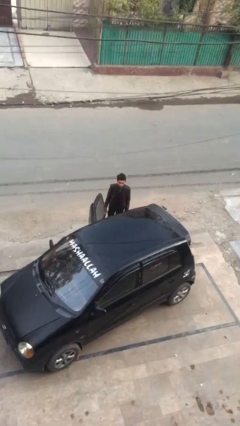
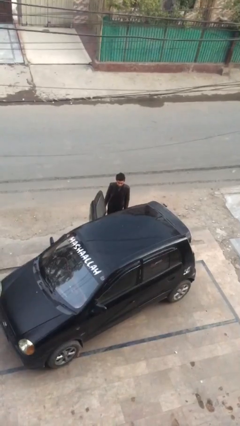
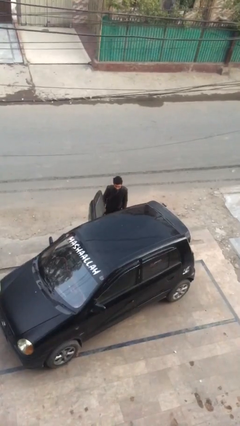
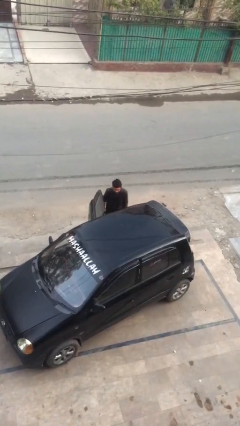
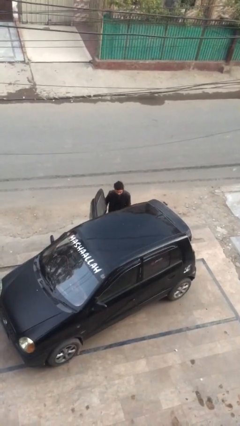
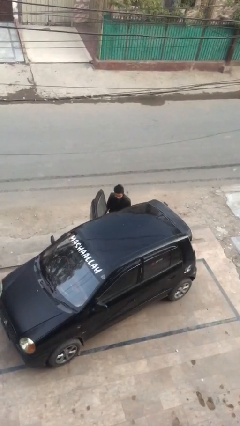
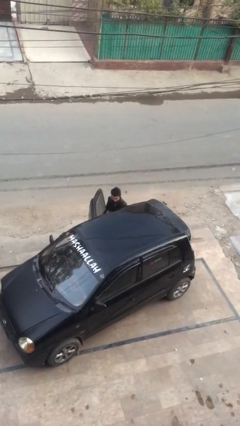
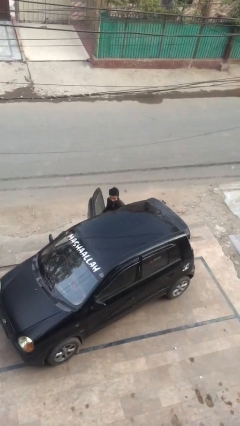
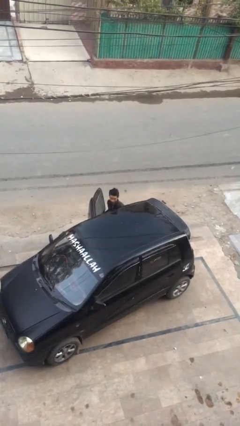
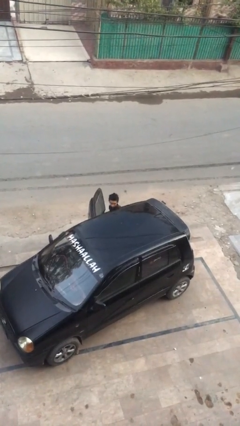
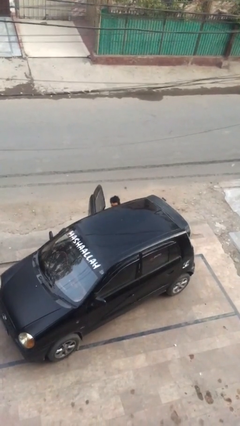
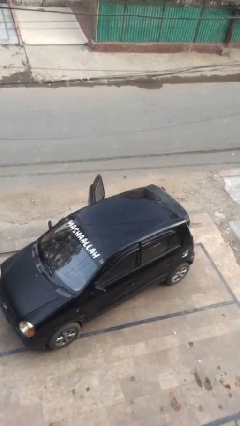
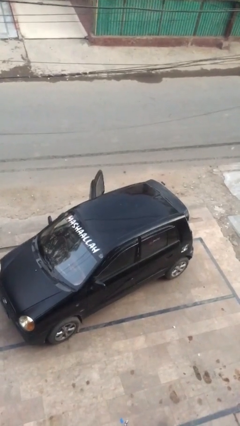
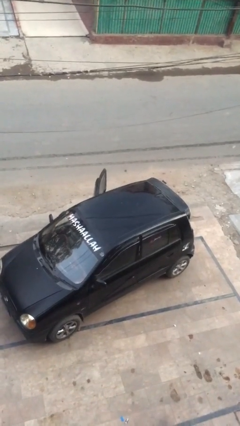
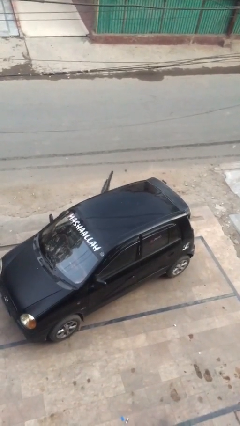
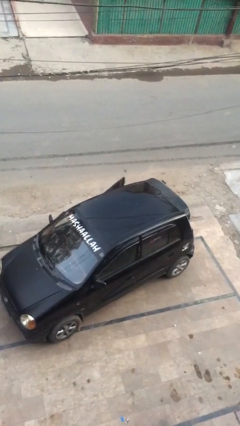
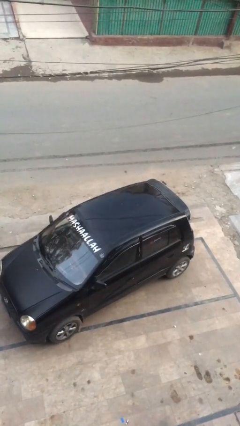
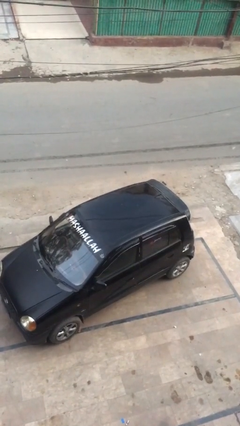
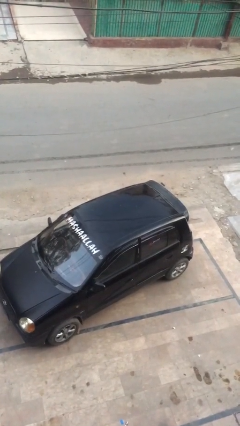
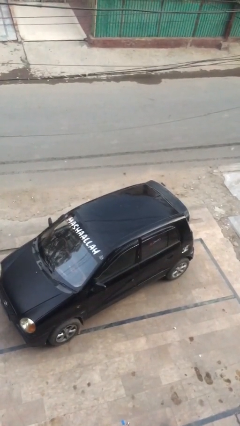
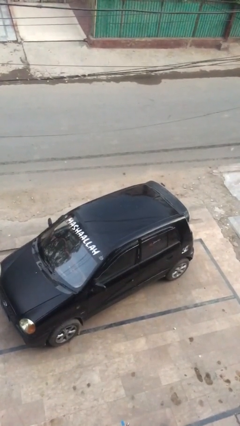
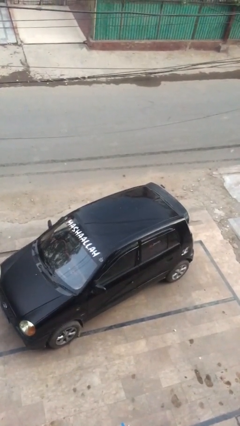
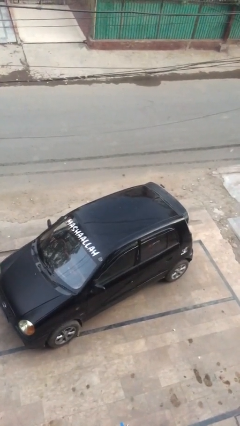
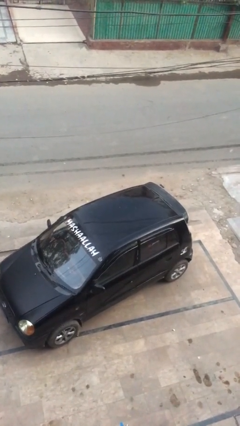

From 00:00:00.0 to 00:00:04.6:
person enters car

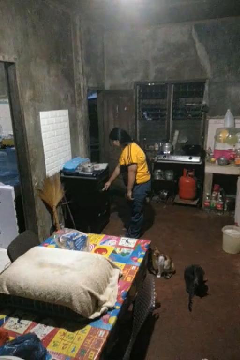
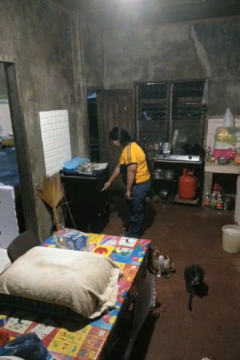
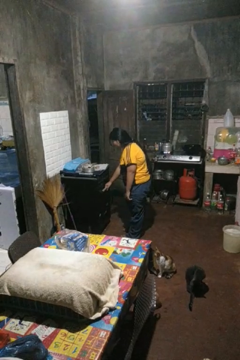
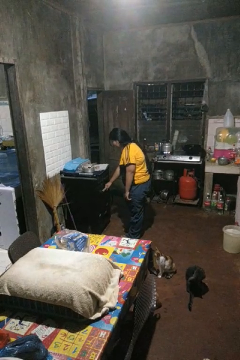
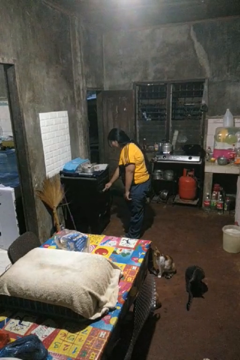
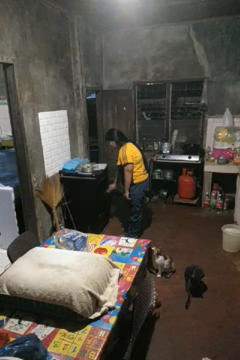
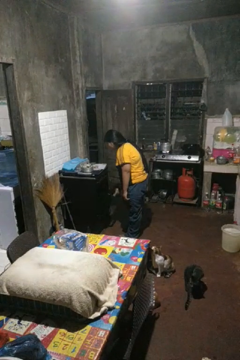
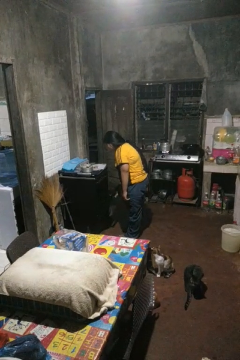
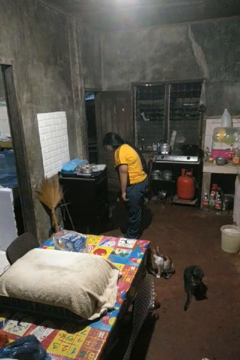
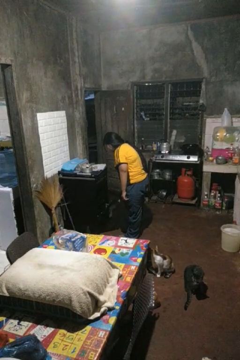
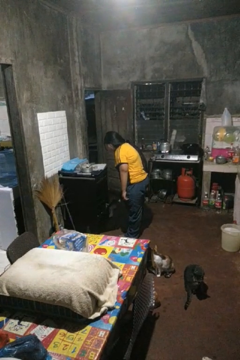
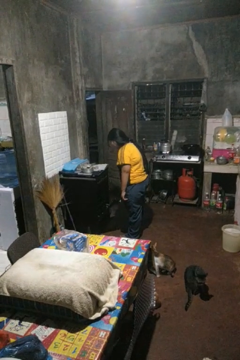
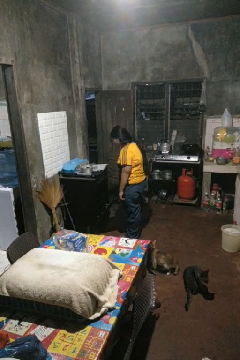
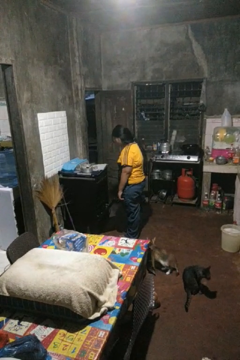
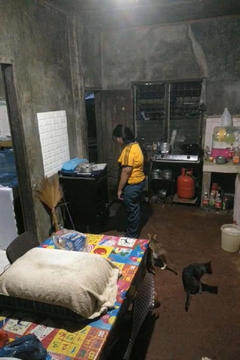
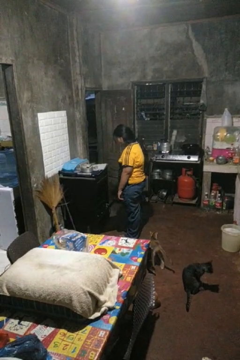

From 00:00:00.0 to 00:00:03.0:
person opens oven door

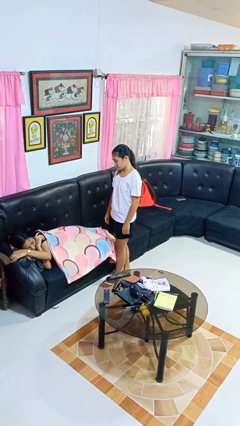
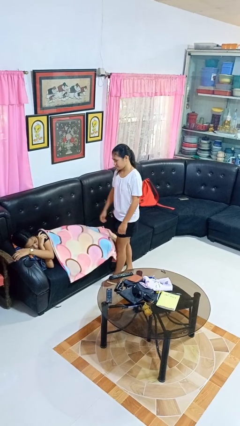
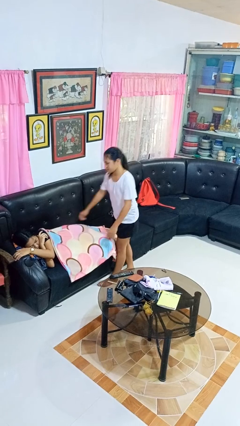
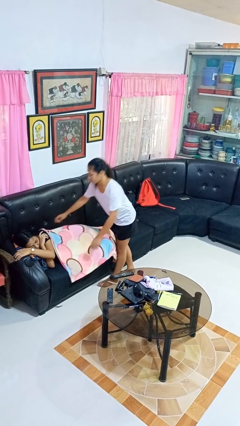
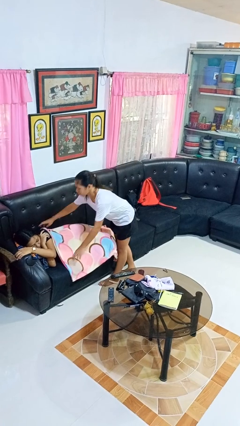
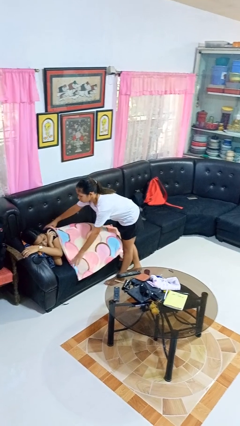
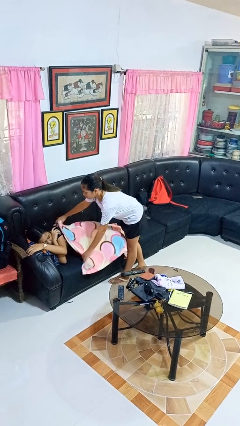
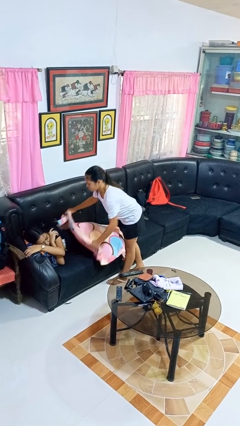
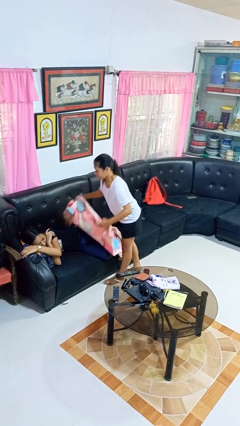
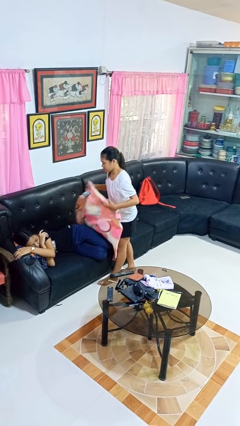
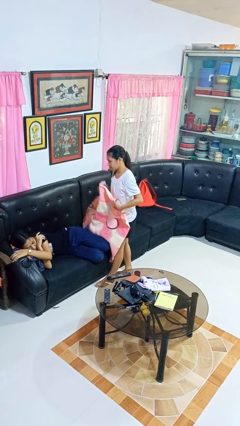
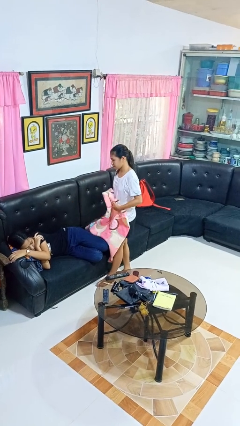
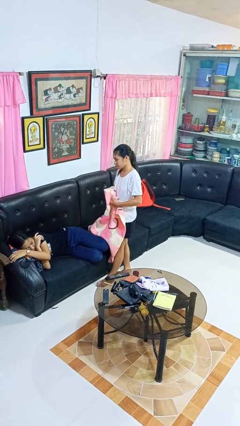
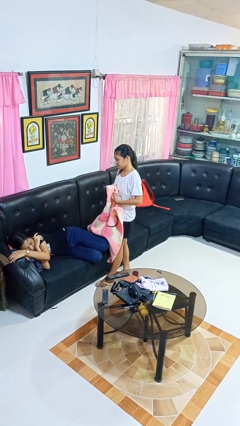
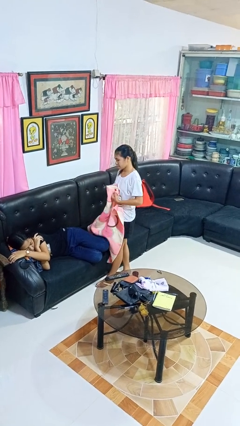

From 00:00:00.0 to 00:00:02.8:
person uncovers friend with blanket

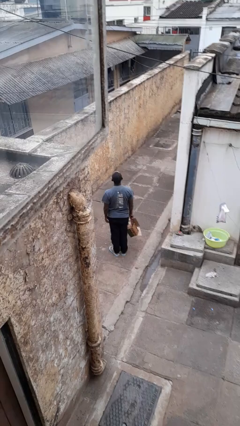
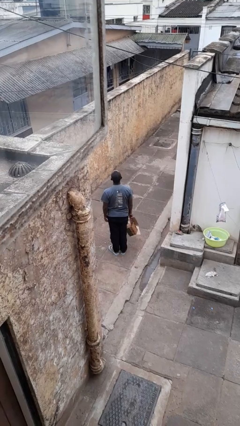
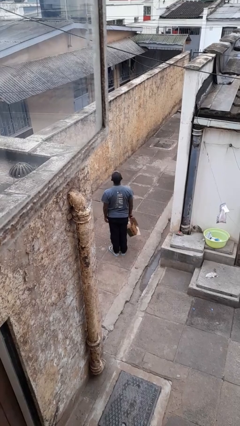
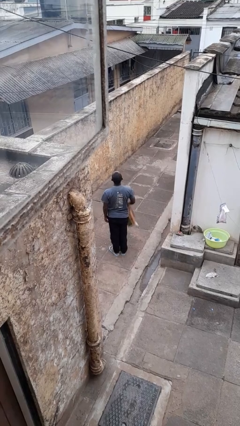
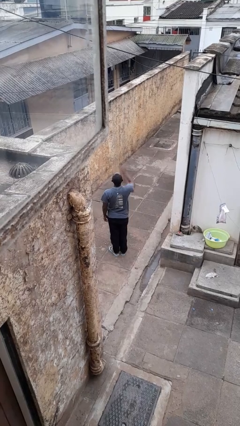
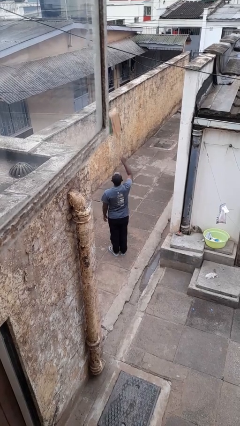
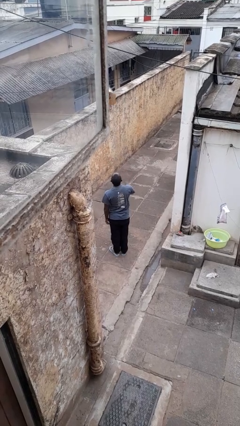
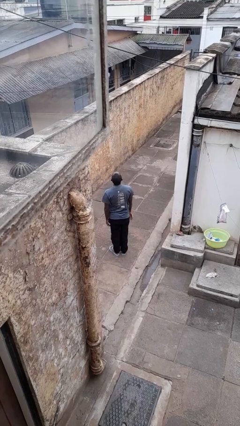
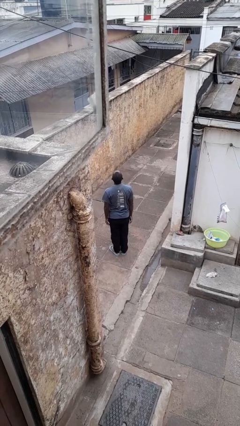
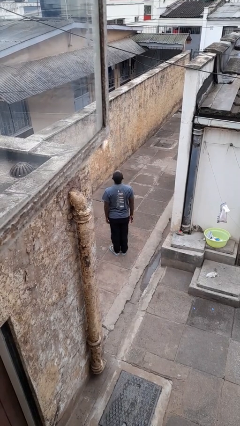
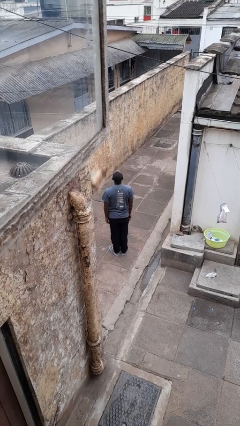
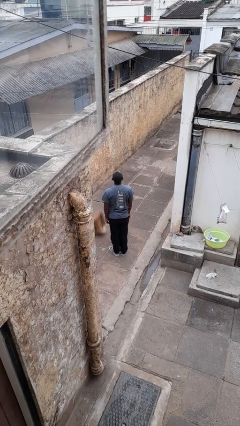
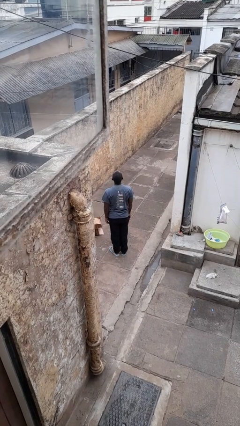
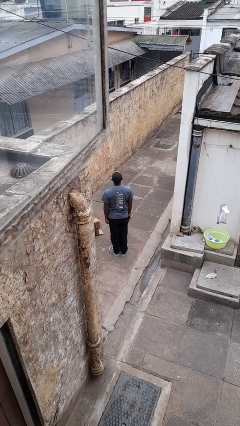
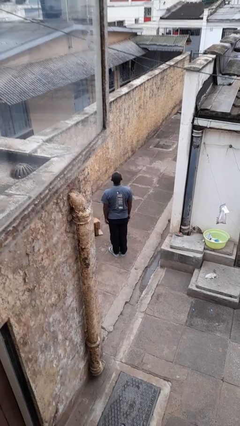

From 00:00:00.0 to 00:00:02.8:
person throws object into air

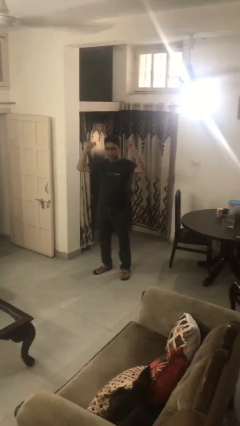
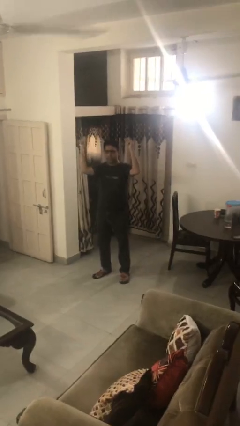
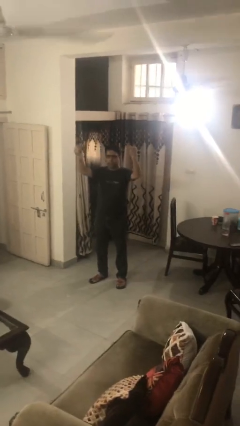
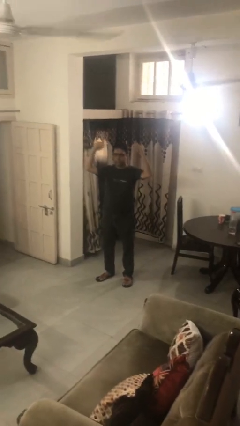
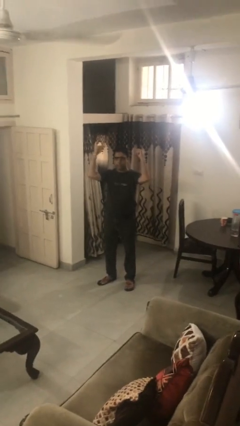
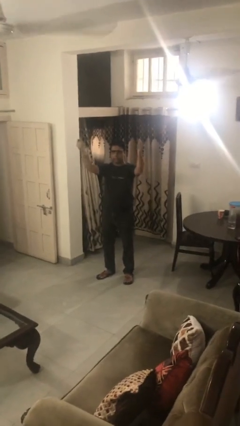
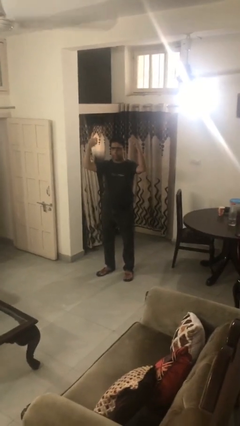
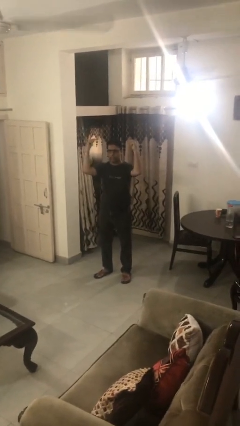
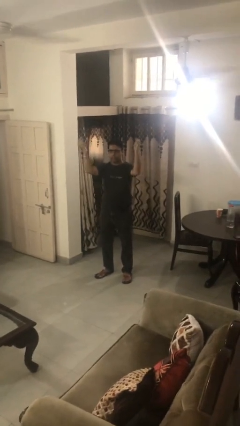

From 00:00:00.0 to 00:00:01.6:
person snaps fingers

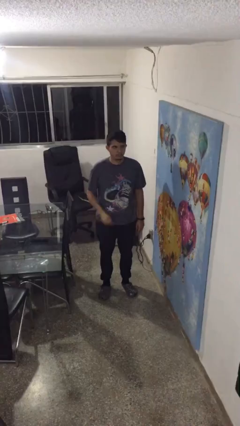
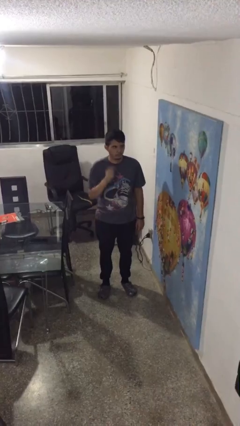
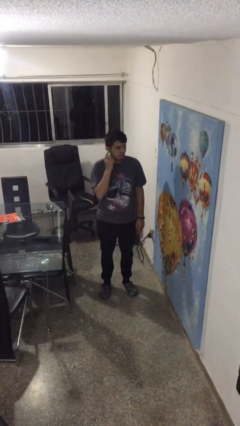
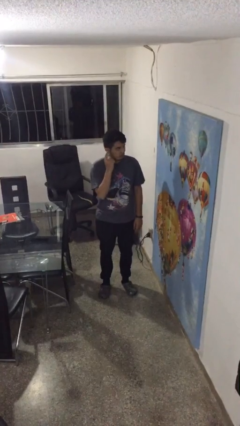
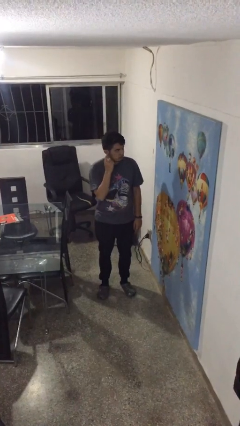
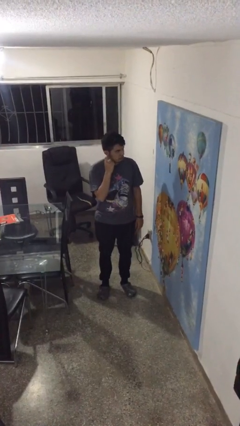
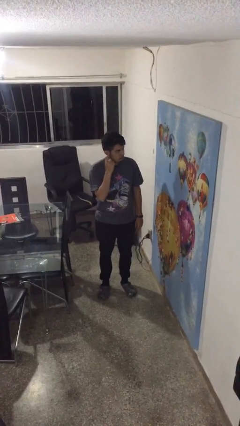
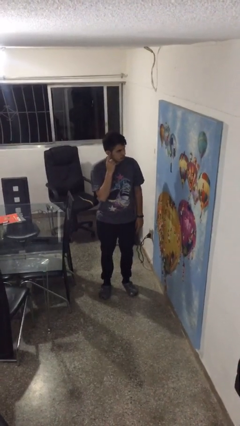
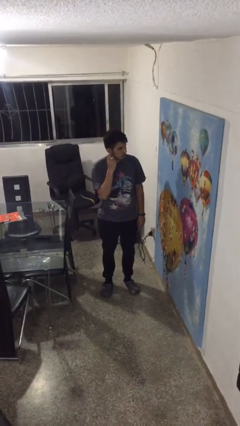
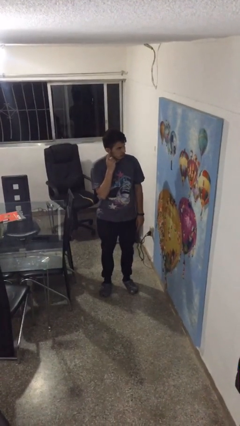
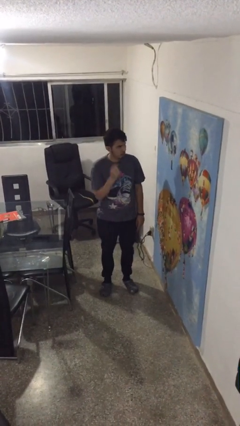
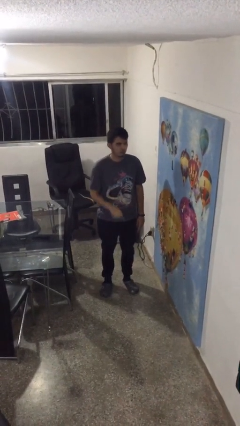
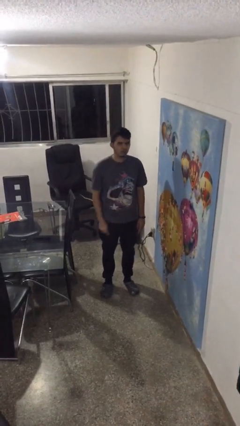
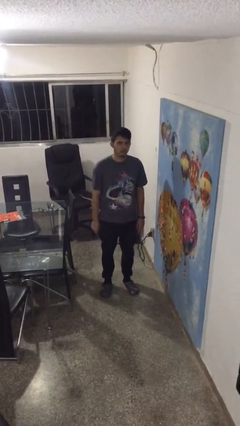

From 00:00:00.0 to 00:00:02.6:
person gestures listen closely

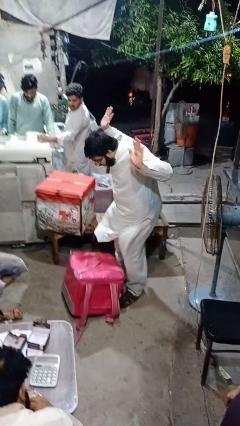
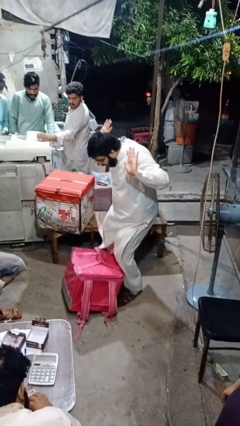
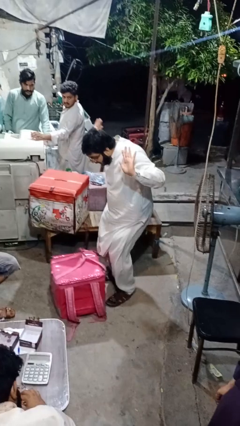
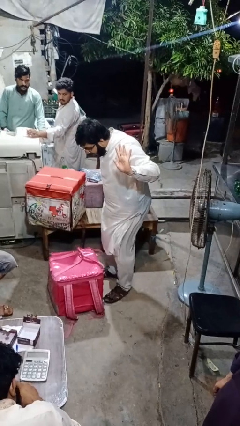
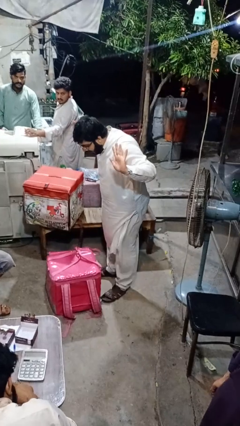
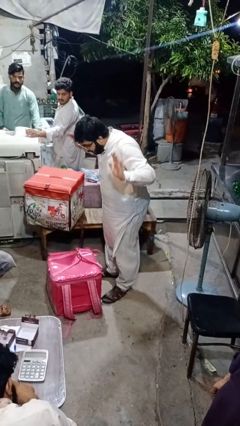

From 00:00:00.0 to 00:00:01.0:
person drops object
